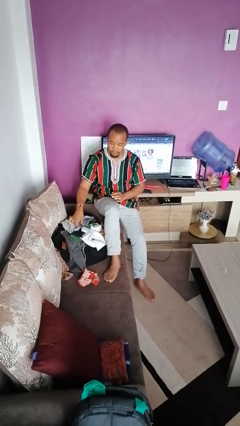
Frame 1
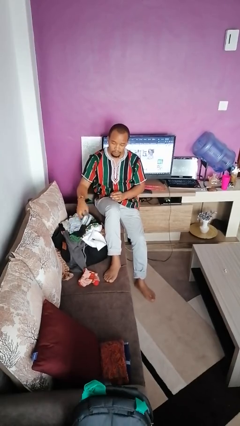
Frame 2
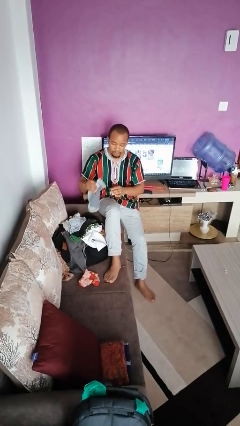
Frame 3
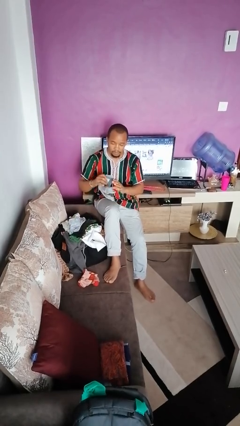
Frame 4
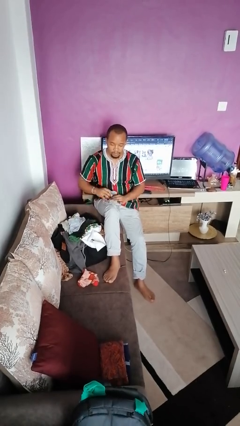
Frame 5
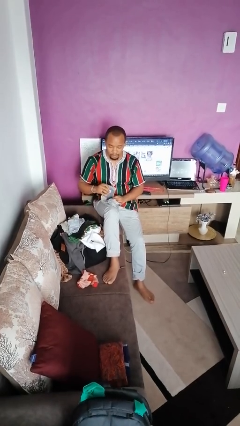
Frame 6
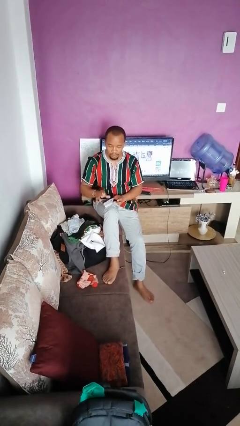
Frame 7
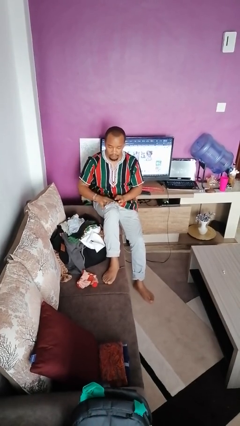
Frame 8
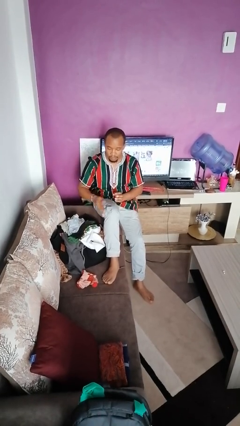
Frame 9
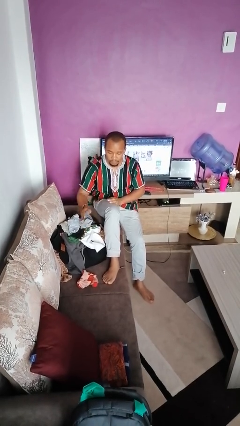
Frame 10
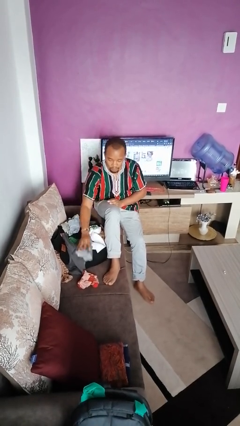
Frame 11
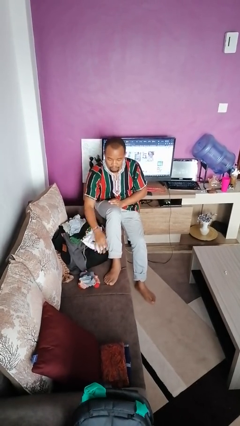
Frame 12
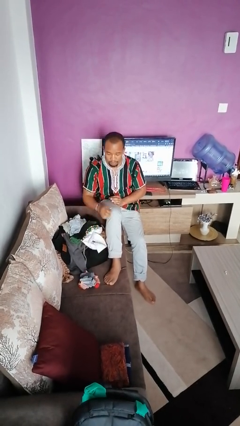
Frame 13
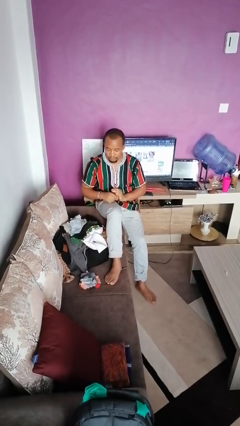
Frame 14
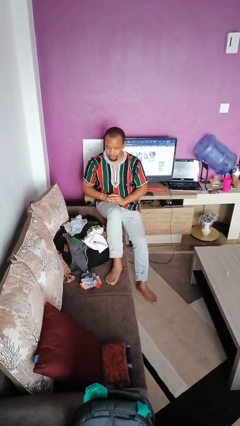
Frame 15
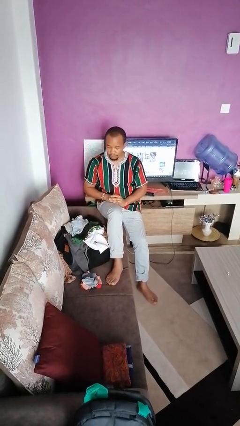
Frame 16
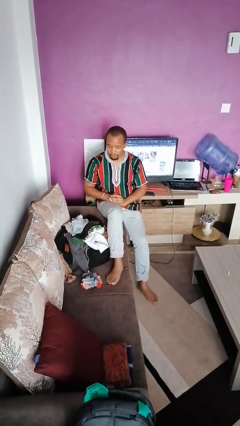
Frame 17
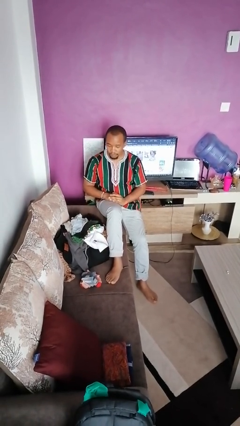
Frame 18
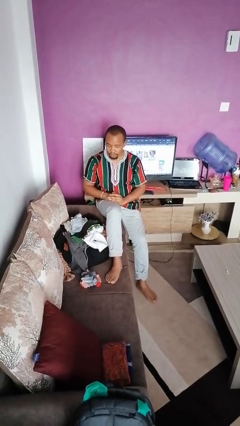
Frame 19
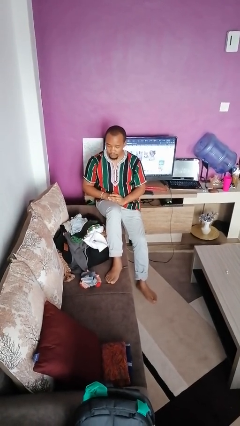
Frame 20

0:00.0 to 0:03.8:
person folds socks

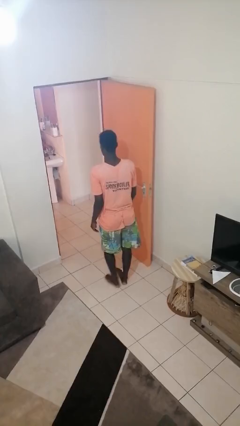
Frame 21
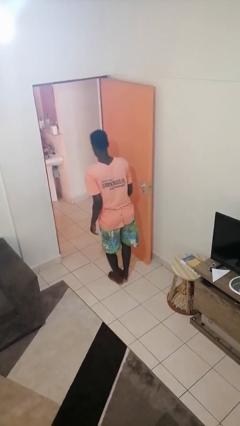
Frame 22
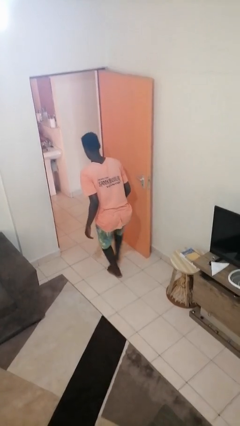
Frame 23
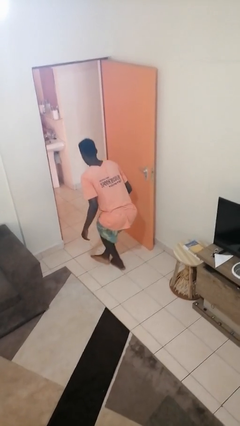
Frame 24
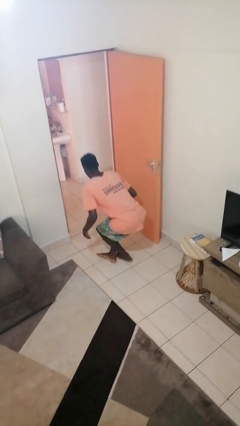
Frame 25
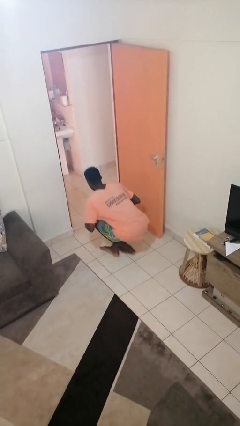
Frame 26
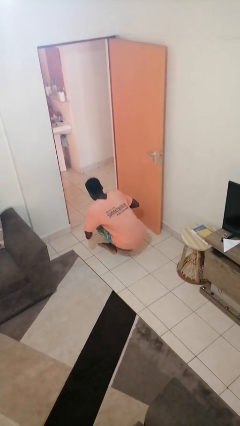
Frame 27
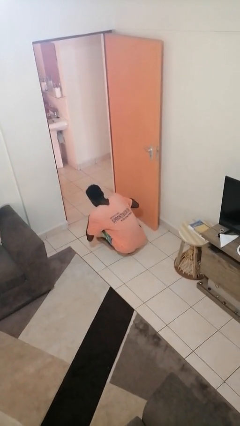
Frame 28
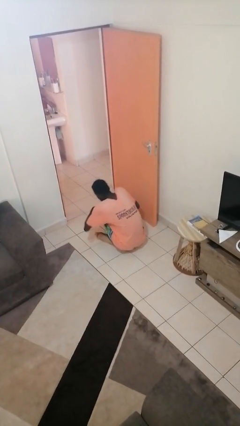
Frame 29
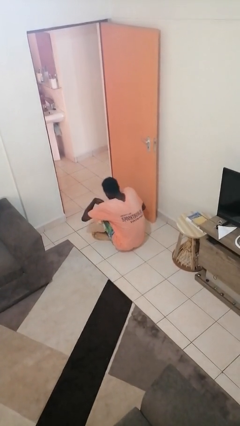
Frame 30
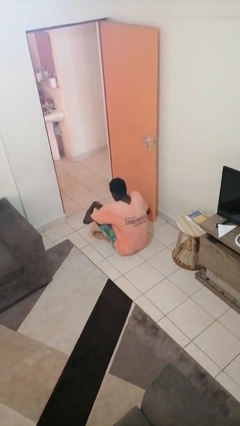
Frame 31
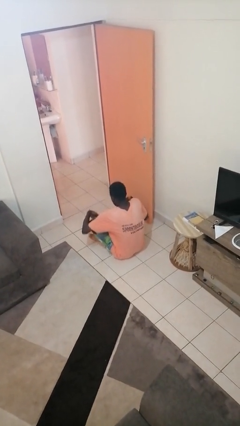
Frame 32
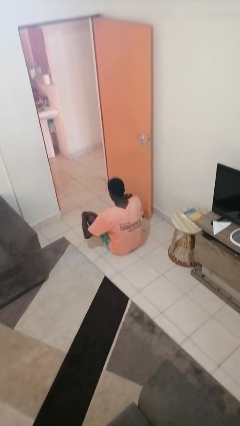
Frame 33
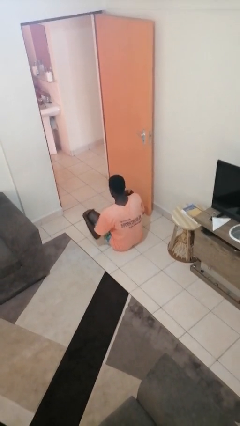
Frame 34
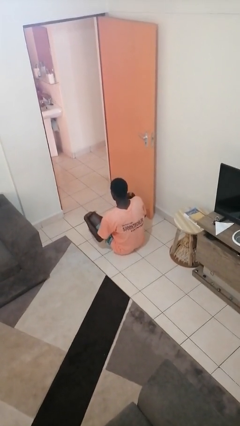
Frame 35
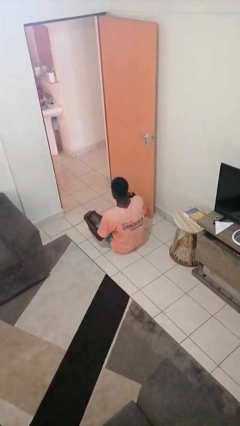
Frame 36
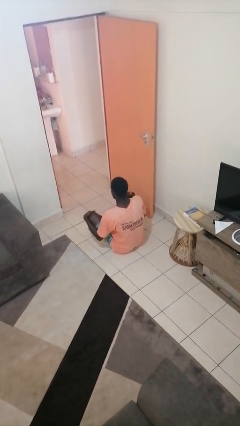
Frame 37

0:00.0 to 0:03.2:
person sits crisscross

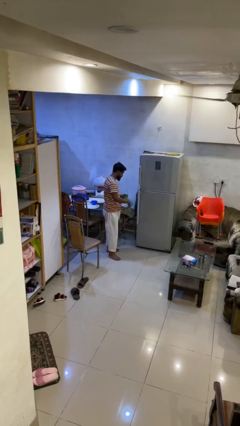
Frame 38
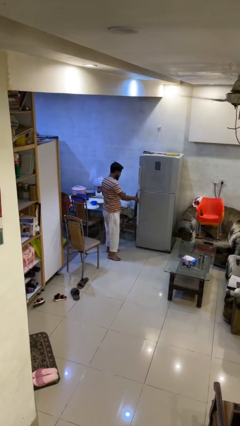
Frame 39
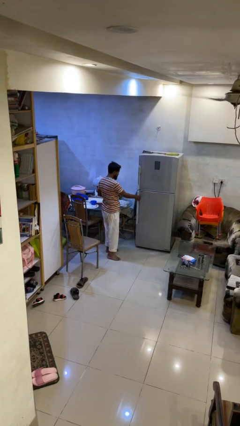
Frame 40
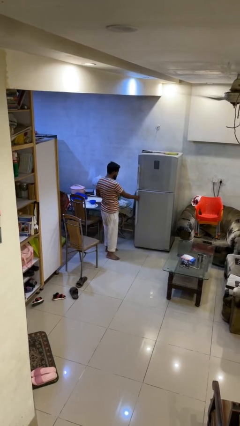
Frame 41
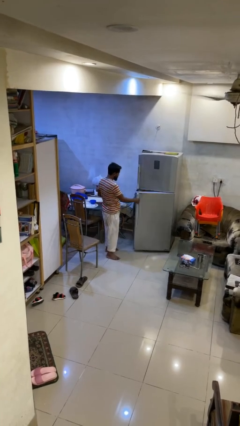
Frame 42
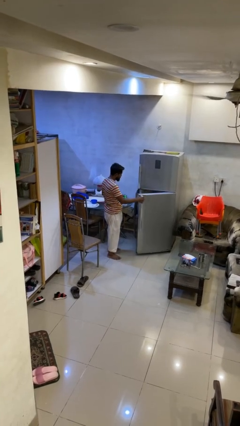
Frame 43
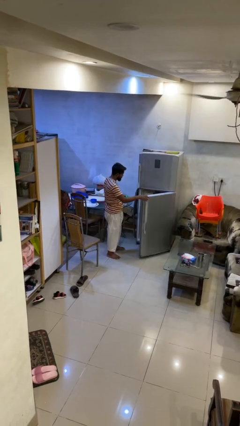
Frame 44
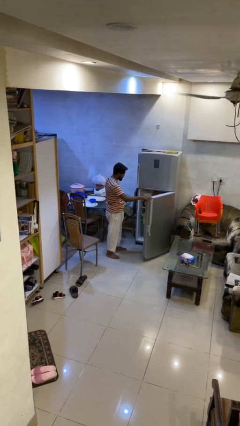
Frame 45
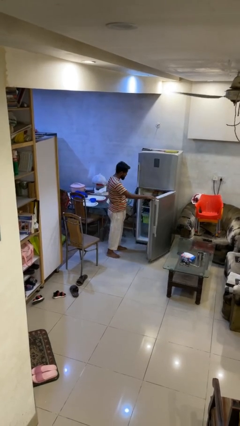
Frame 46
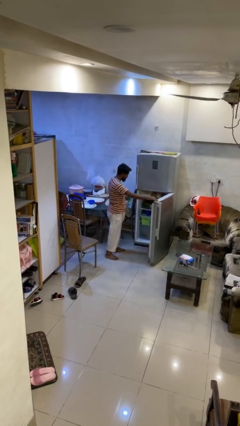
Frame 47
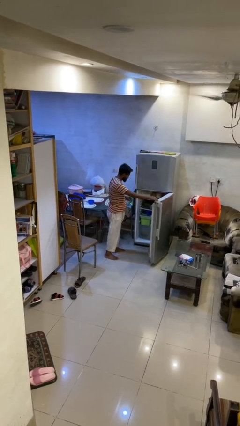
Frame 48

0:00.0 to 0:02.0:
person opens refrigerator

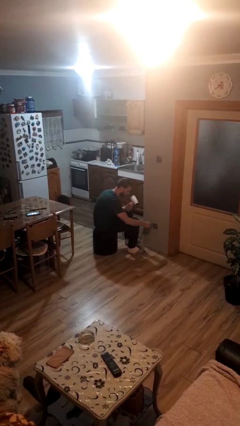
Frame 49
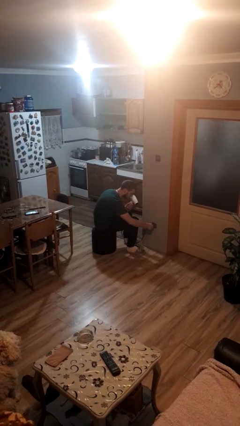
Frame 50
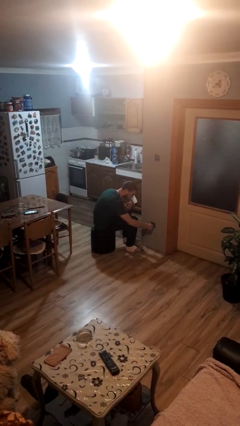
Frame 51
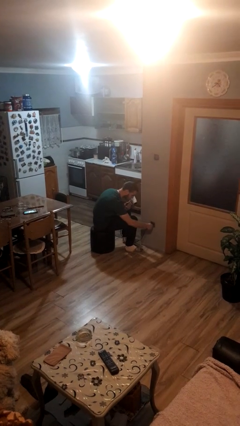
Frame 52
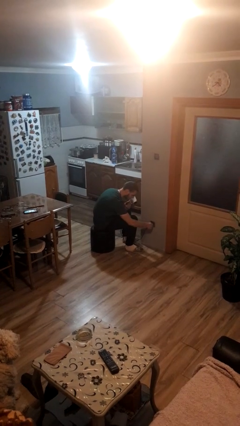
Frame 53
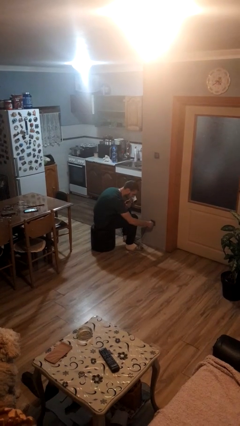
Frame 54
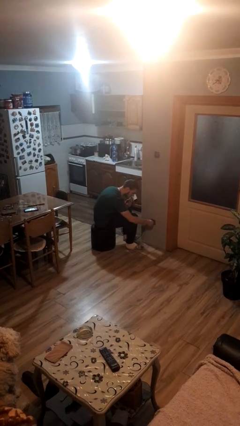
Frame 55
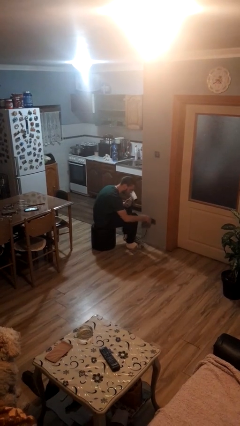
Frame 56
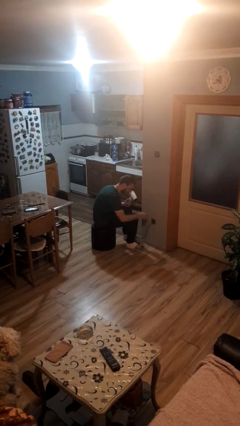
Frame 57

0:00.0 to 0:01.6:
person plugs into electrical socket

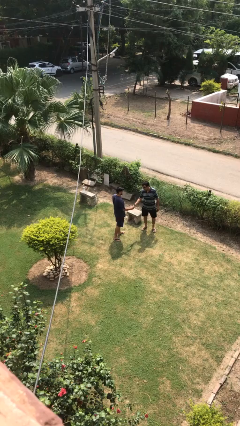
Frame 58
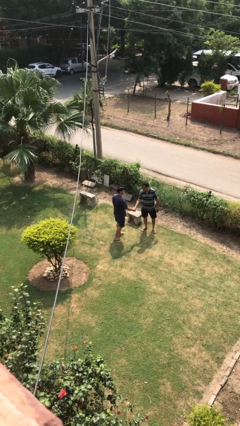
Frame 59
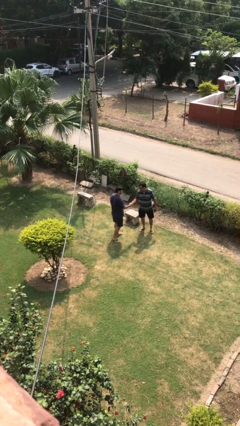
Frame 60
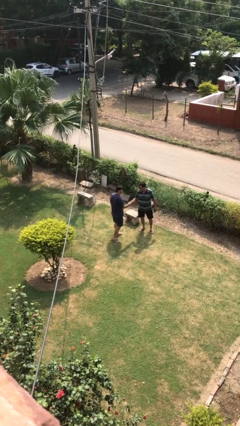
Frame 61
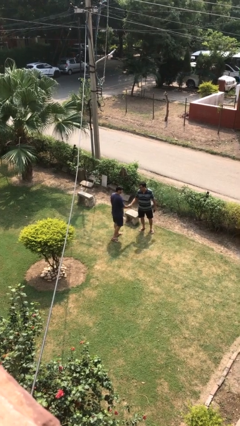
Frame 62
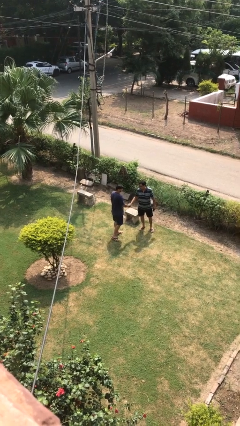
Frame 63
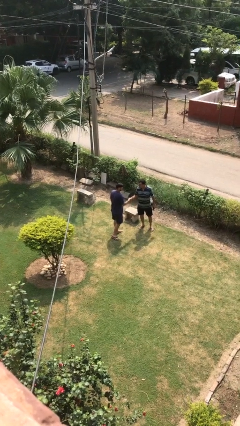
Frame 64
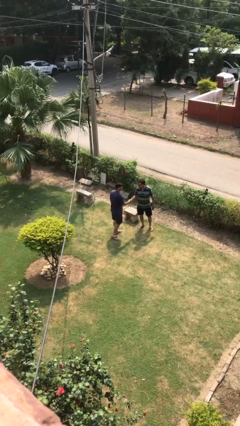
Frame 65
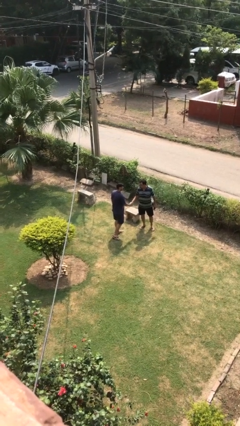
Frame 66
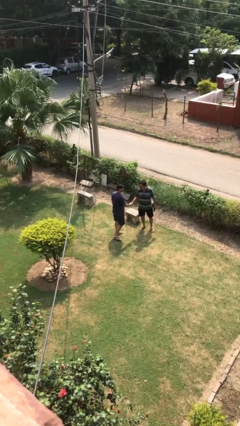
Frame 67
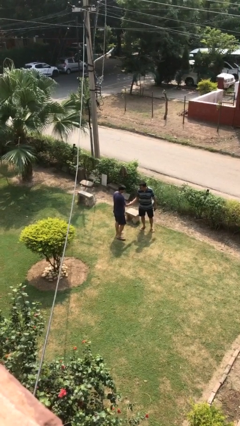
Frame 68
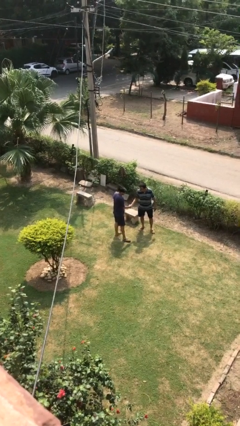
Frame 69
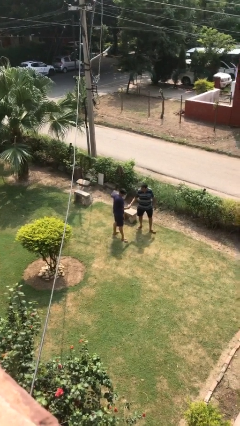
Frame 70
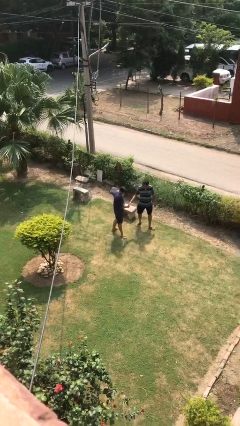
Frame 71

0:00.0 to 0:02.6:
person shakes hand

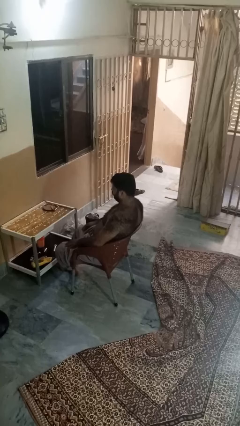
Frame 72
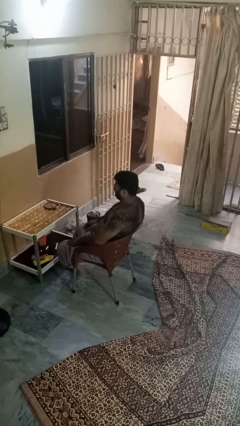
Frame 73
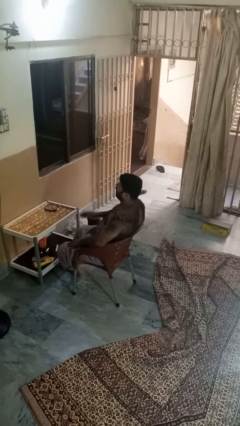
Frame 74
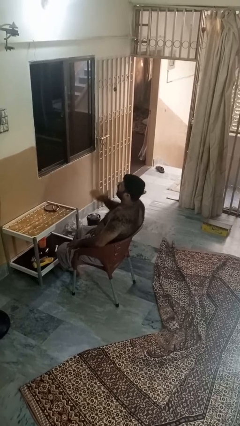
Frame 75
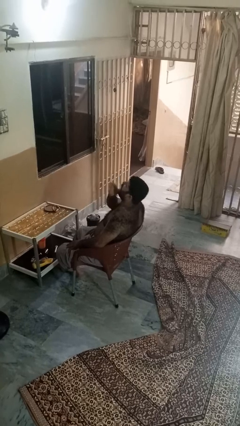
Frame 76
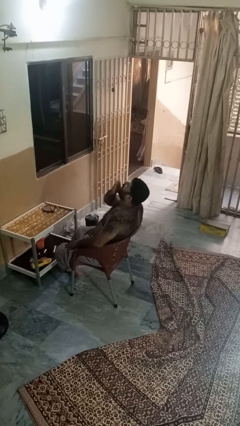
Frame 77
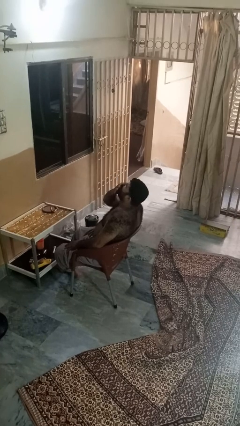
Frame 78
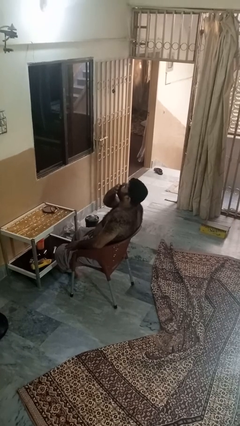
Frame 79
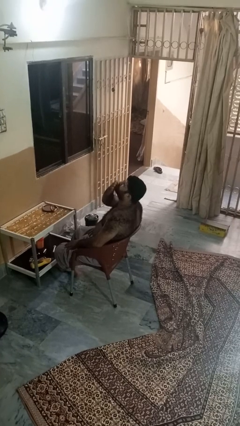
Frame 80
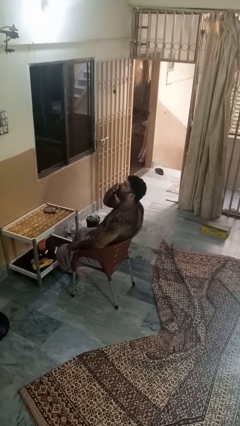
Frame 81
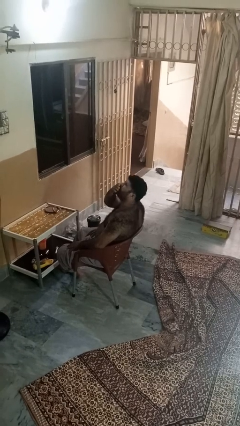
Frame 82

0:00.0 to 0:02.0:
person yawns

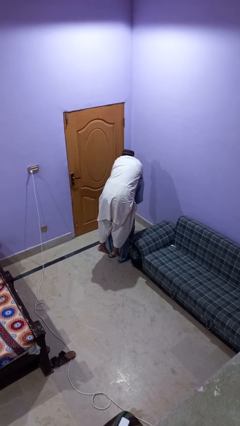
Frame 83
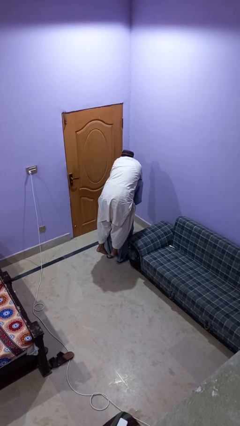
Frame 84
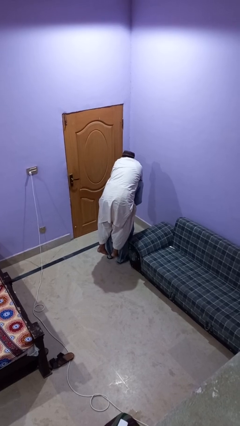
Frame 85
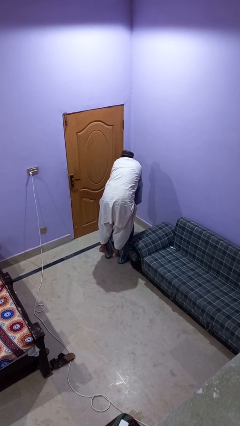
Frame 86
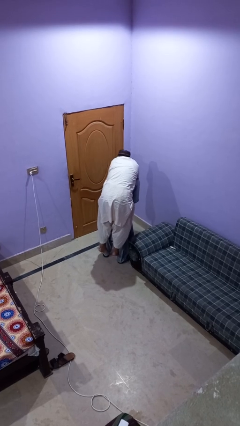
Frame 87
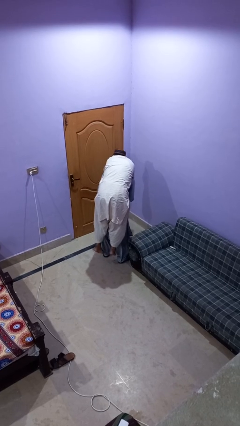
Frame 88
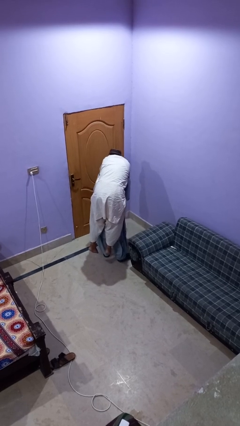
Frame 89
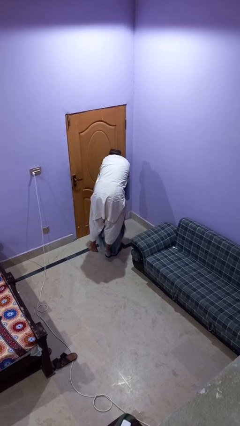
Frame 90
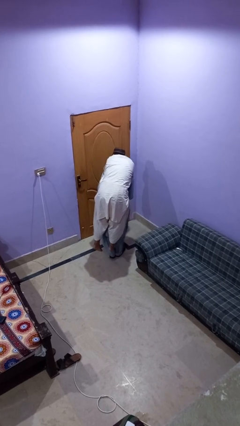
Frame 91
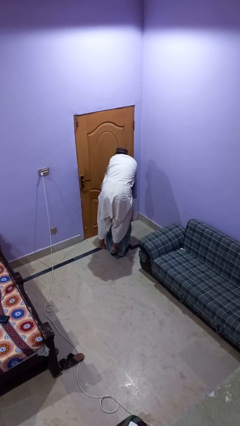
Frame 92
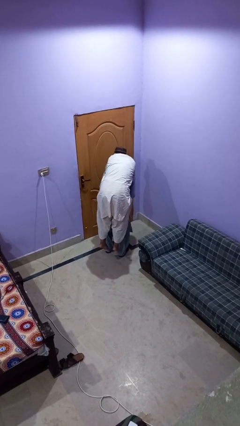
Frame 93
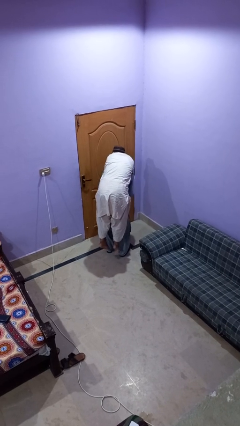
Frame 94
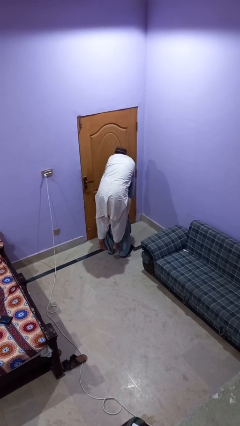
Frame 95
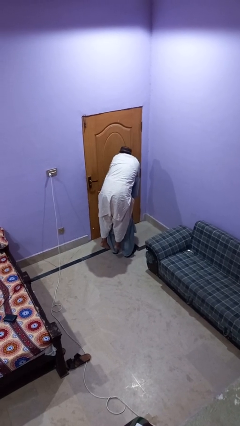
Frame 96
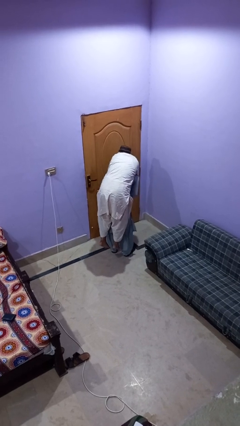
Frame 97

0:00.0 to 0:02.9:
person carries person on back
